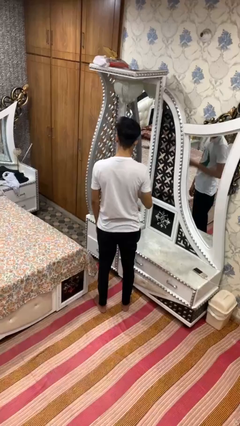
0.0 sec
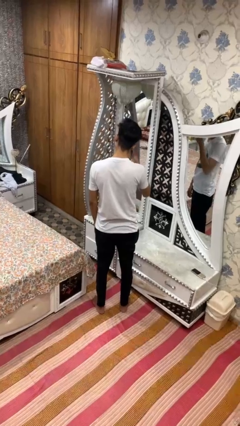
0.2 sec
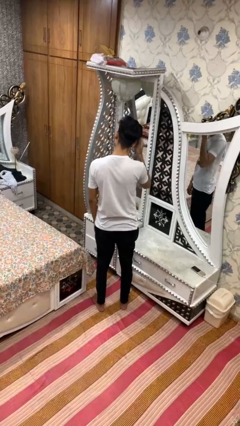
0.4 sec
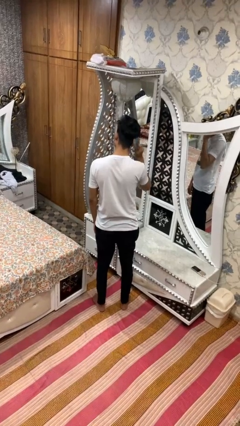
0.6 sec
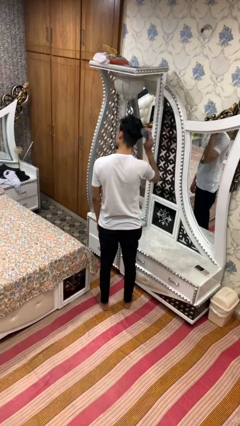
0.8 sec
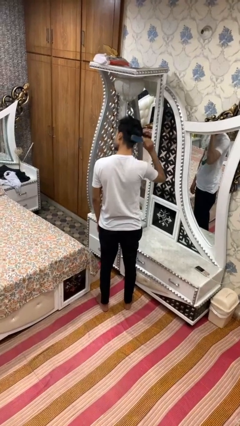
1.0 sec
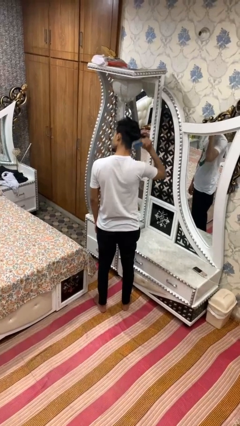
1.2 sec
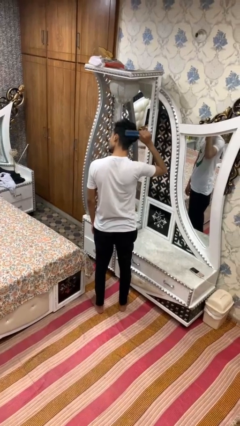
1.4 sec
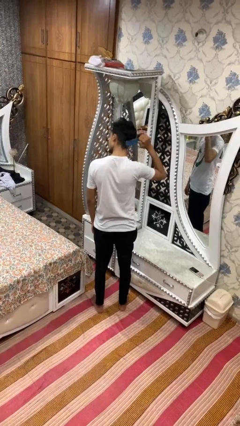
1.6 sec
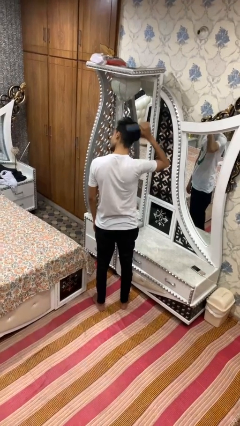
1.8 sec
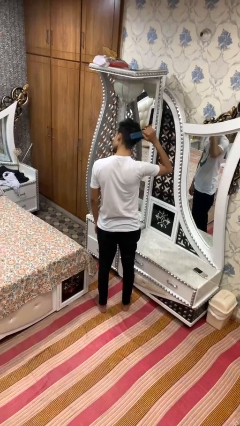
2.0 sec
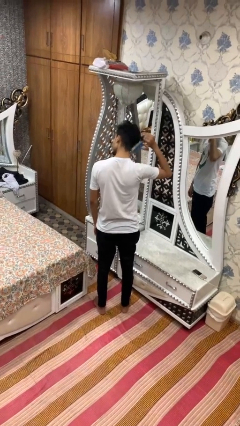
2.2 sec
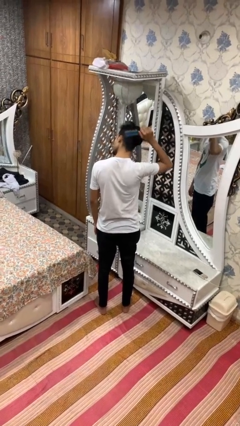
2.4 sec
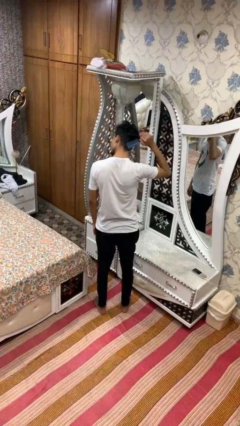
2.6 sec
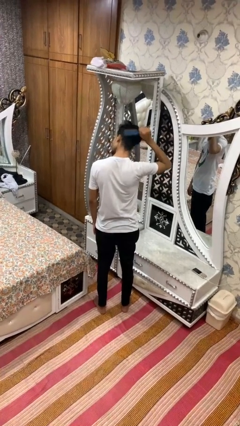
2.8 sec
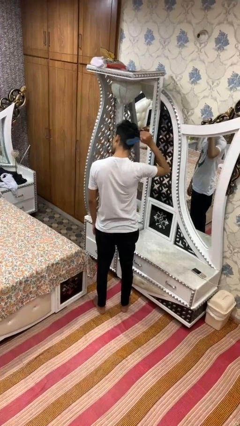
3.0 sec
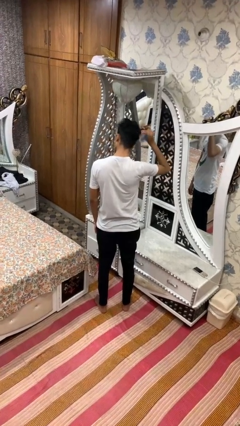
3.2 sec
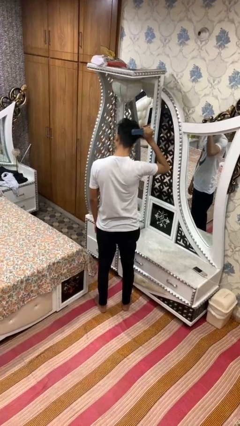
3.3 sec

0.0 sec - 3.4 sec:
person brushes hair

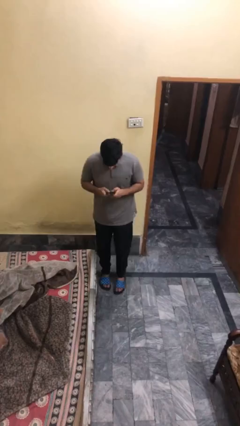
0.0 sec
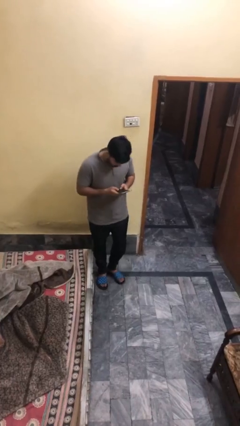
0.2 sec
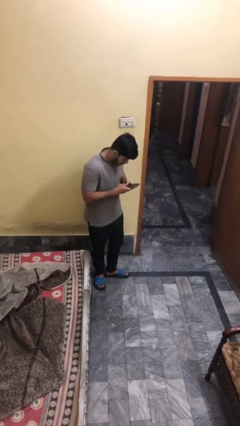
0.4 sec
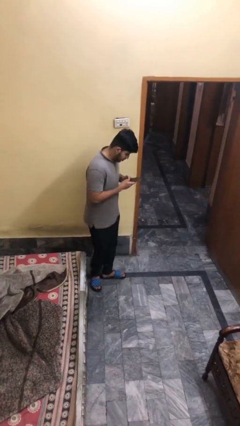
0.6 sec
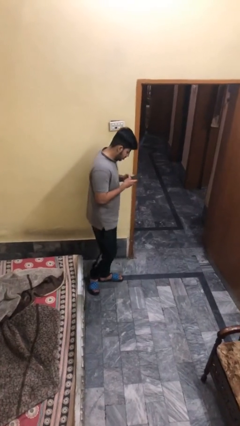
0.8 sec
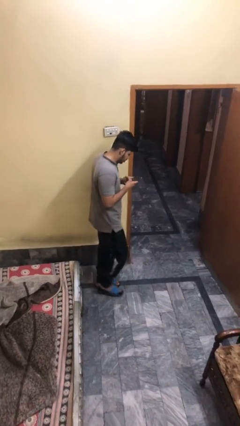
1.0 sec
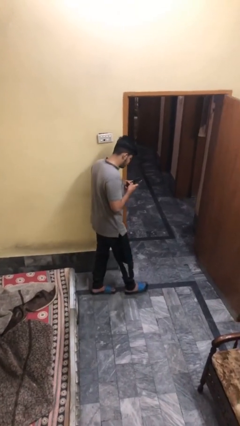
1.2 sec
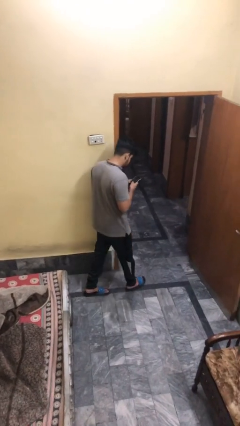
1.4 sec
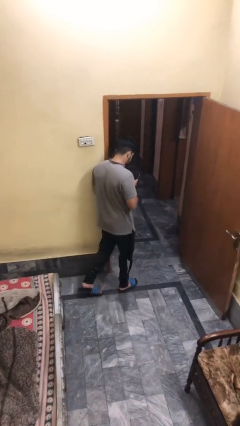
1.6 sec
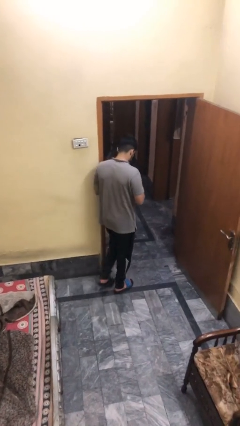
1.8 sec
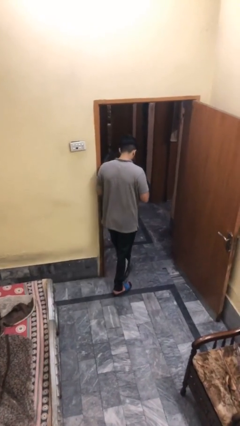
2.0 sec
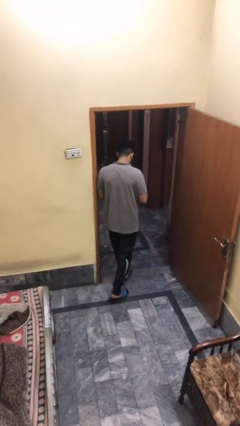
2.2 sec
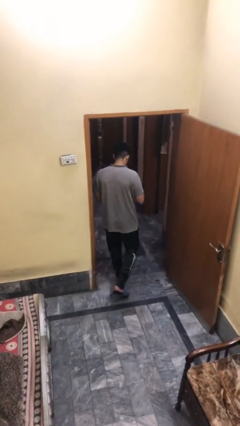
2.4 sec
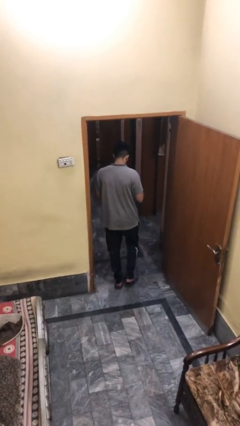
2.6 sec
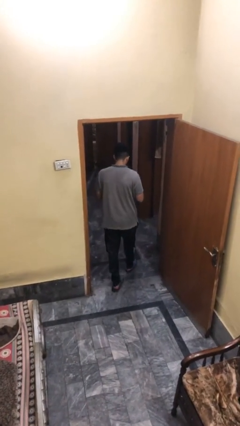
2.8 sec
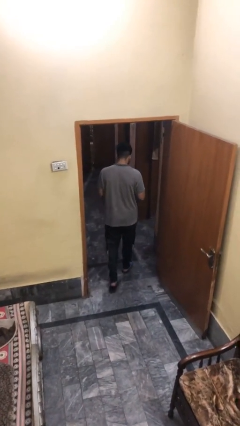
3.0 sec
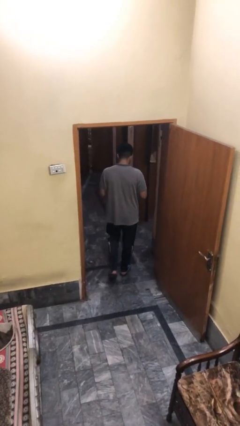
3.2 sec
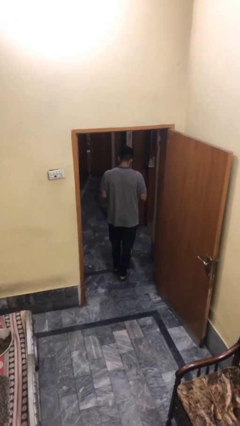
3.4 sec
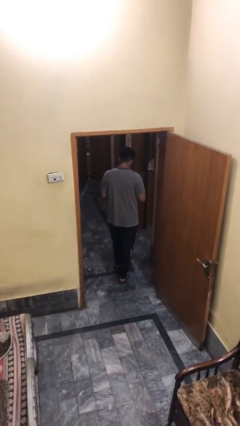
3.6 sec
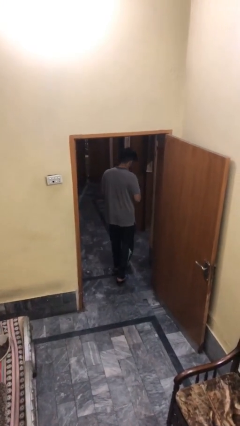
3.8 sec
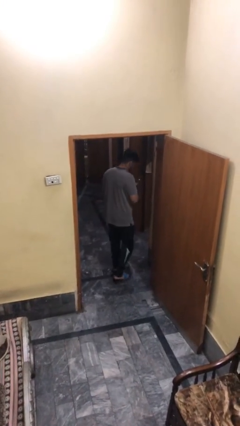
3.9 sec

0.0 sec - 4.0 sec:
person exits scene through structure

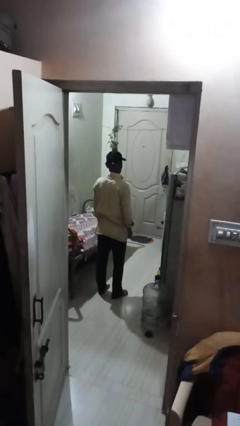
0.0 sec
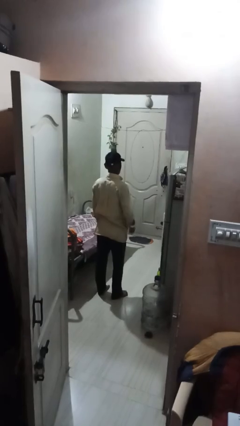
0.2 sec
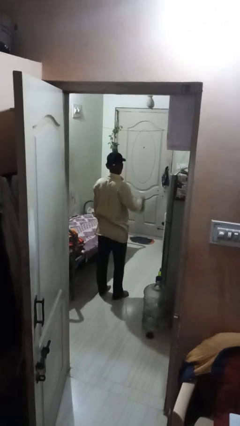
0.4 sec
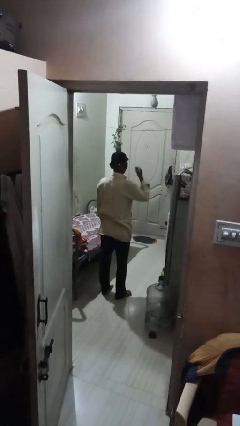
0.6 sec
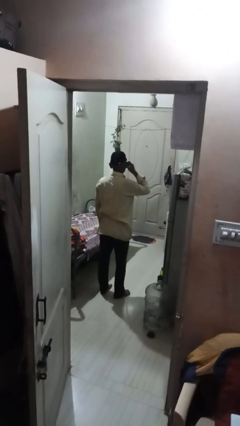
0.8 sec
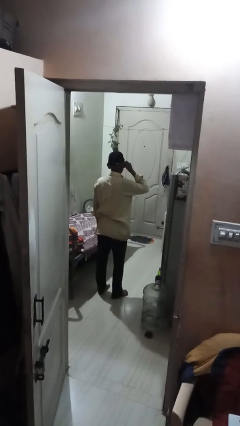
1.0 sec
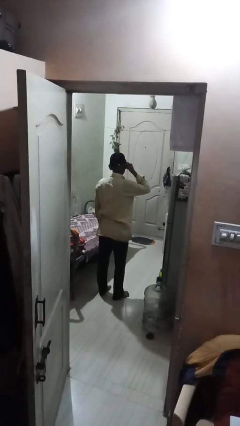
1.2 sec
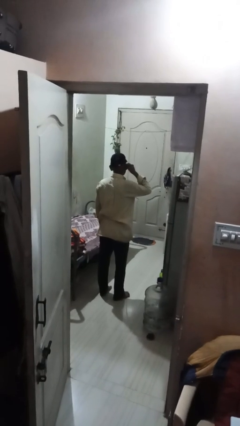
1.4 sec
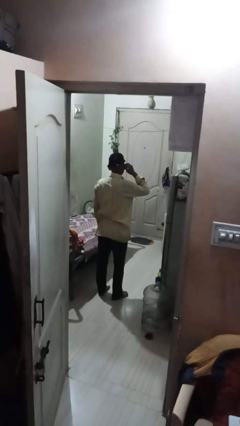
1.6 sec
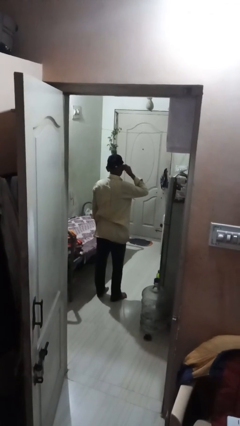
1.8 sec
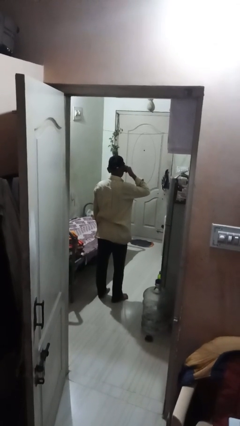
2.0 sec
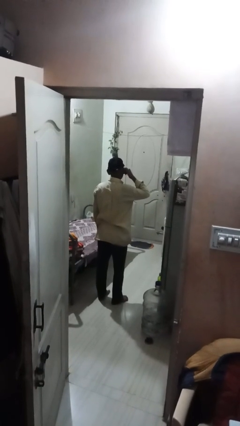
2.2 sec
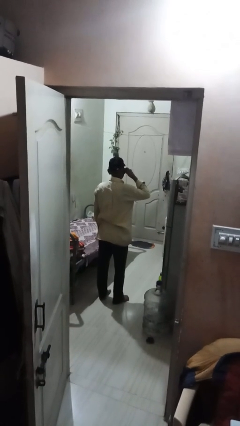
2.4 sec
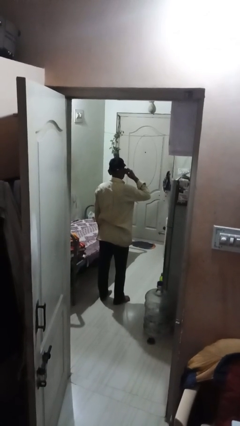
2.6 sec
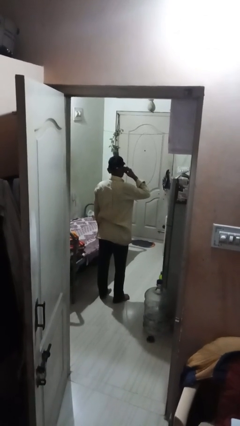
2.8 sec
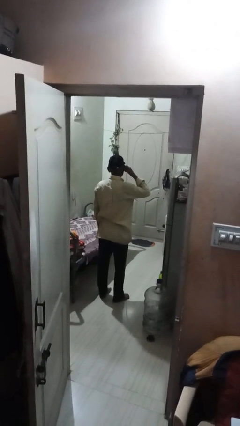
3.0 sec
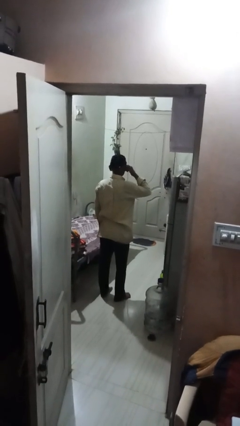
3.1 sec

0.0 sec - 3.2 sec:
person touches earlobe

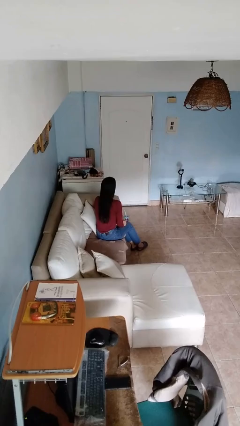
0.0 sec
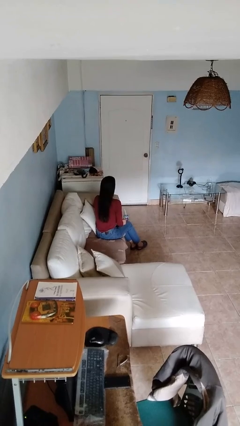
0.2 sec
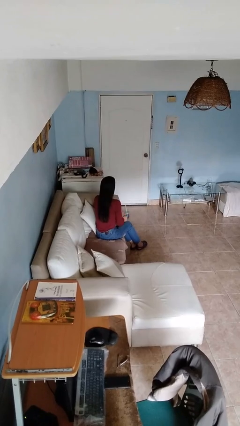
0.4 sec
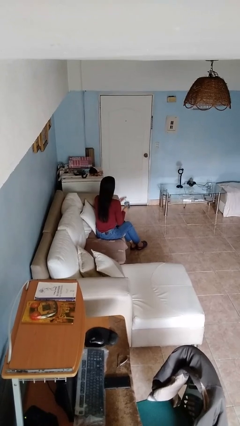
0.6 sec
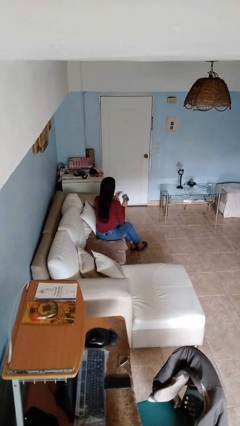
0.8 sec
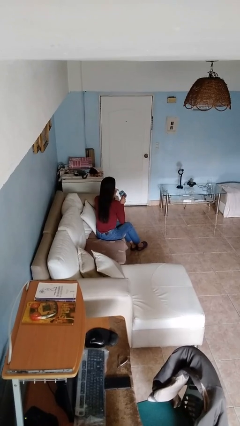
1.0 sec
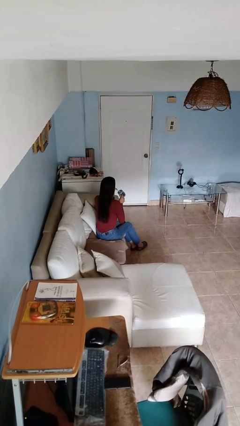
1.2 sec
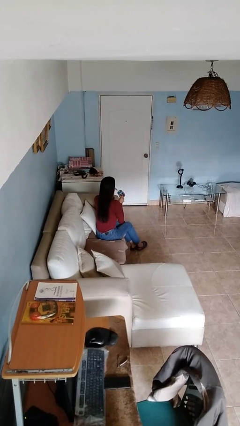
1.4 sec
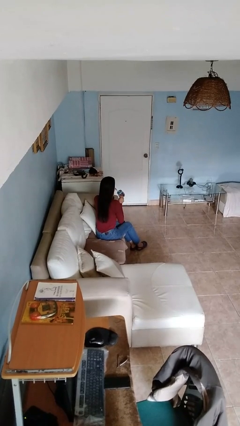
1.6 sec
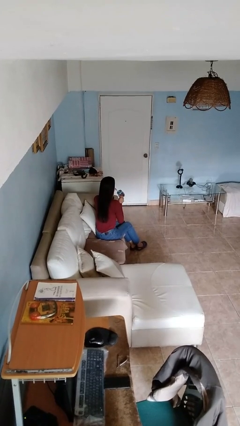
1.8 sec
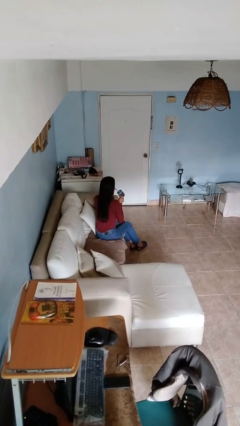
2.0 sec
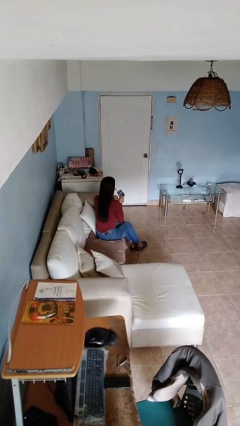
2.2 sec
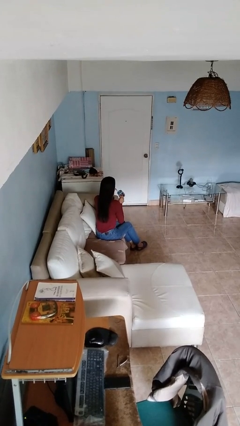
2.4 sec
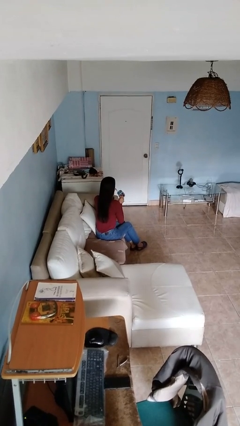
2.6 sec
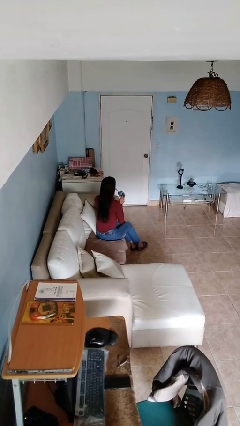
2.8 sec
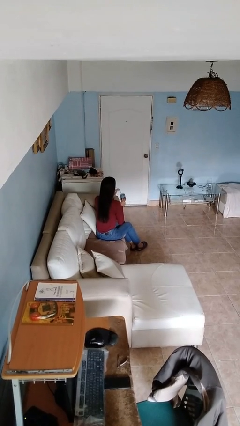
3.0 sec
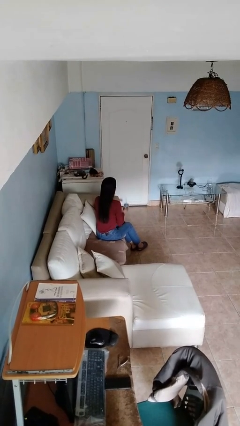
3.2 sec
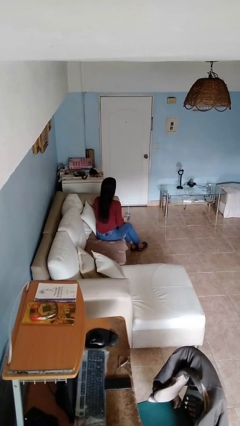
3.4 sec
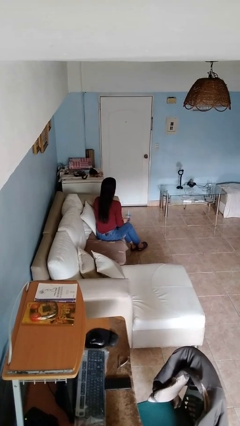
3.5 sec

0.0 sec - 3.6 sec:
person drinks from straw

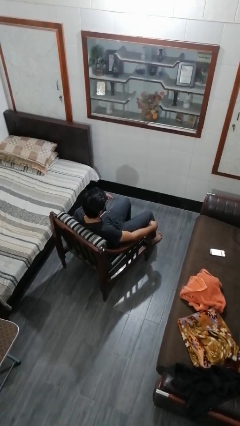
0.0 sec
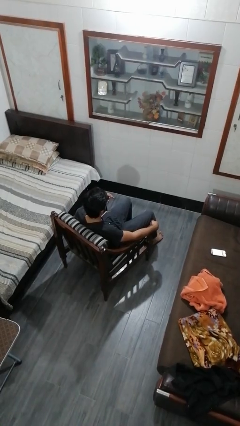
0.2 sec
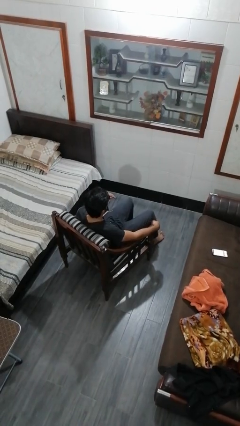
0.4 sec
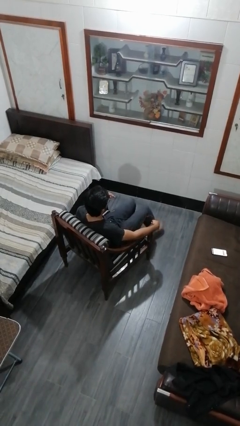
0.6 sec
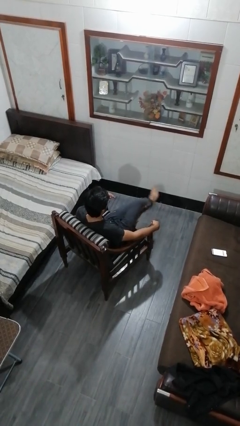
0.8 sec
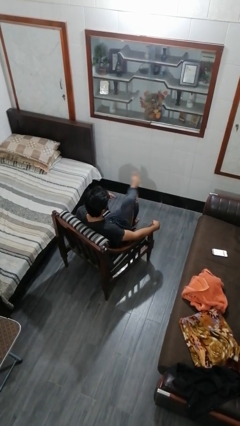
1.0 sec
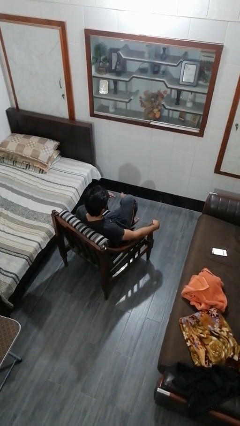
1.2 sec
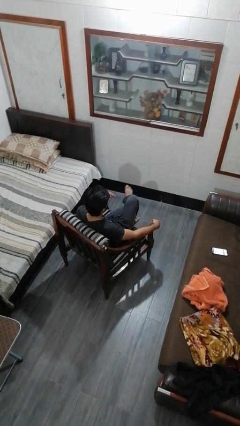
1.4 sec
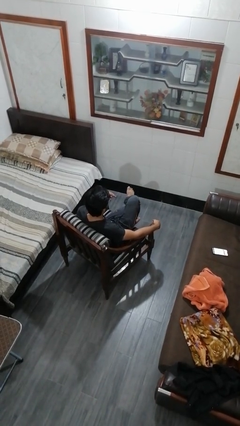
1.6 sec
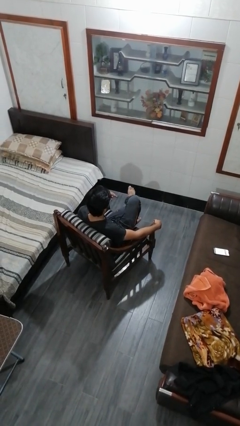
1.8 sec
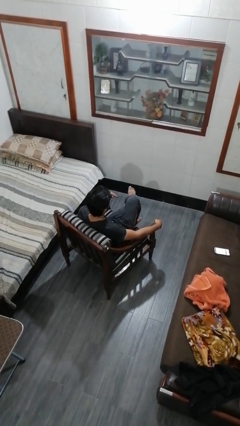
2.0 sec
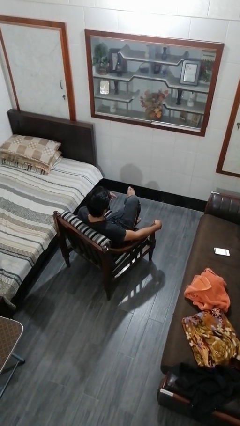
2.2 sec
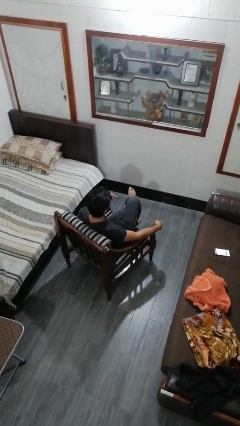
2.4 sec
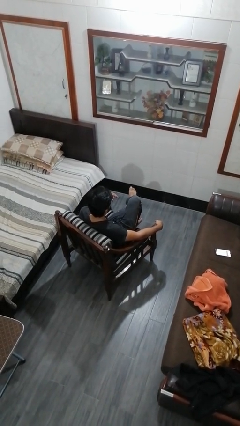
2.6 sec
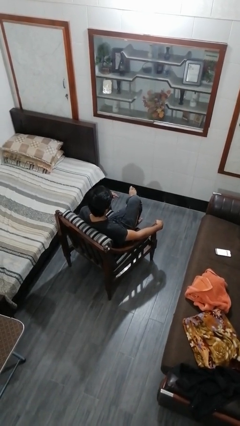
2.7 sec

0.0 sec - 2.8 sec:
person crosses legs

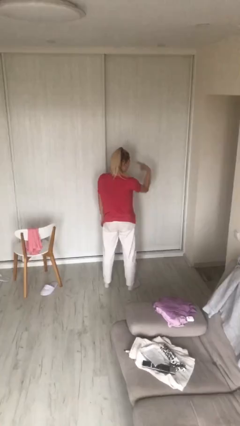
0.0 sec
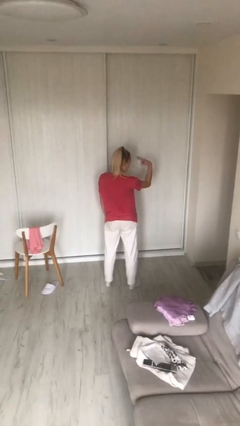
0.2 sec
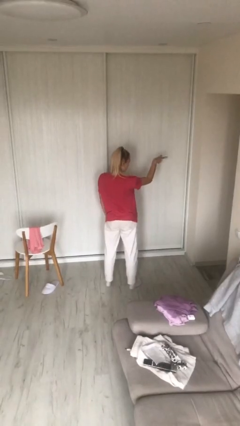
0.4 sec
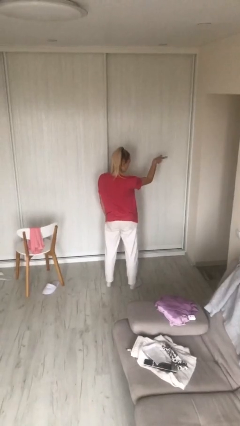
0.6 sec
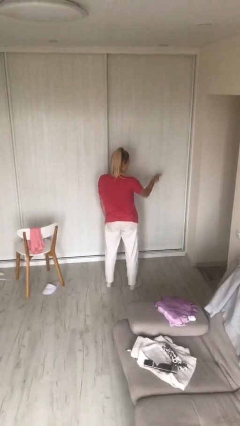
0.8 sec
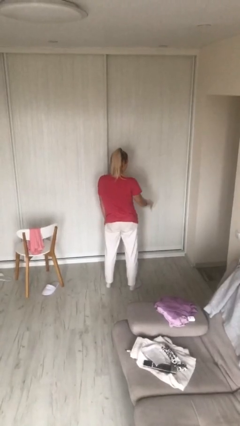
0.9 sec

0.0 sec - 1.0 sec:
person gestures watch closely
